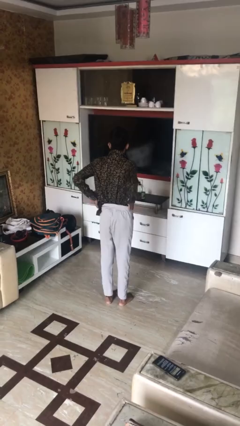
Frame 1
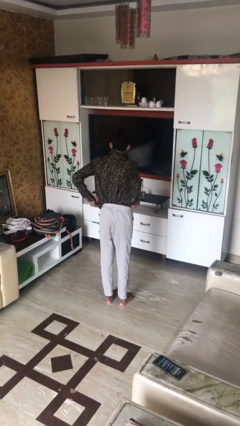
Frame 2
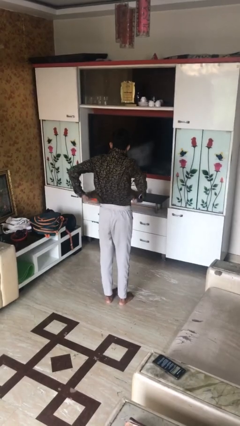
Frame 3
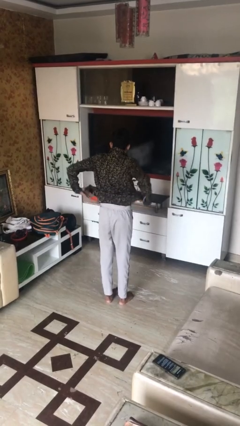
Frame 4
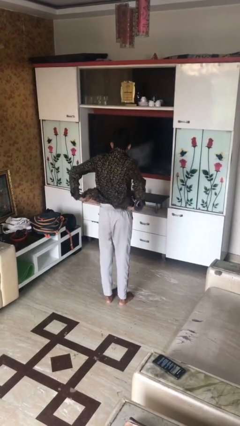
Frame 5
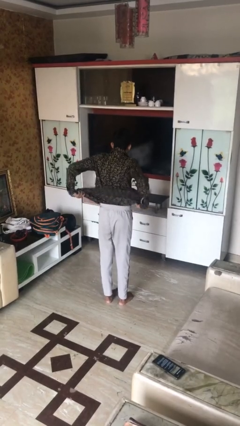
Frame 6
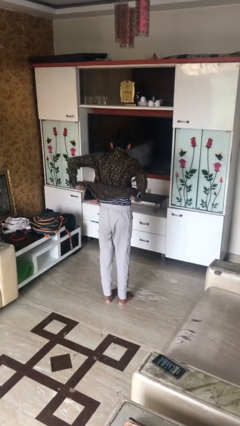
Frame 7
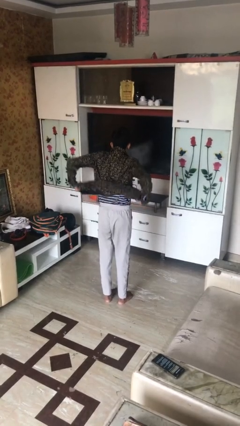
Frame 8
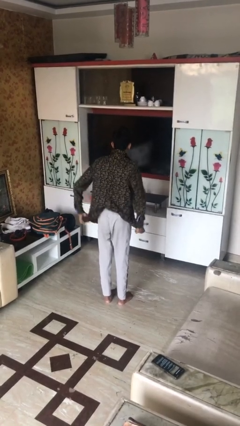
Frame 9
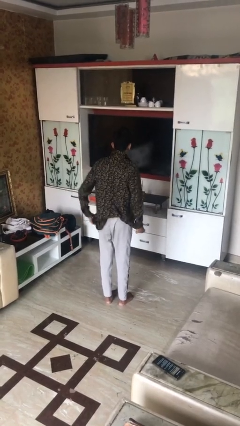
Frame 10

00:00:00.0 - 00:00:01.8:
person untucks shirt

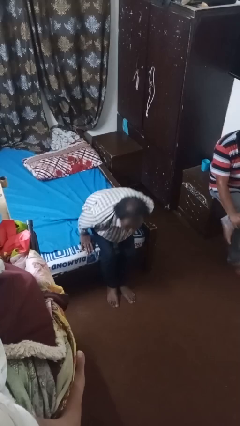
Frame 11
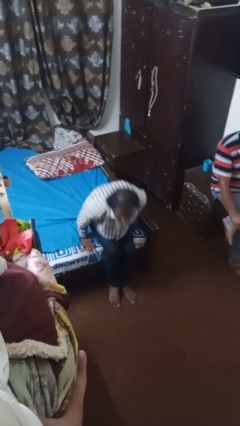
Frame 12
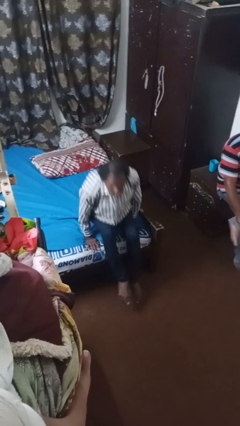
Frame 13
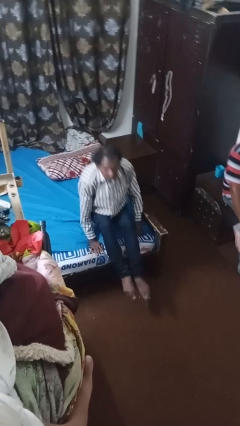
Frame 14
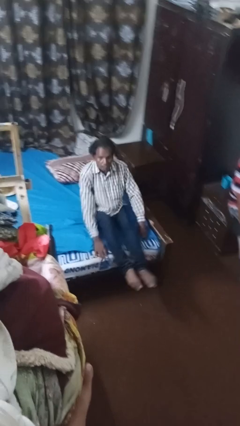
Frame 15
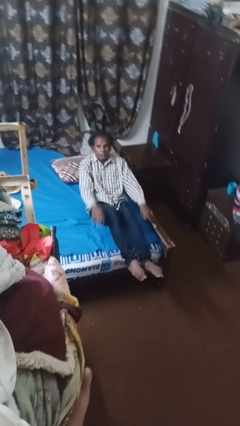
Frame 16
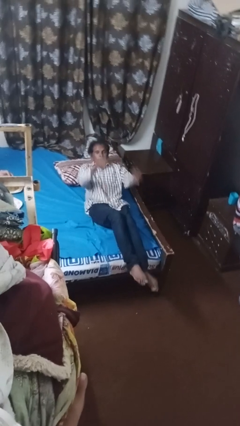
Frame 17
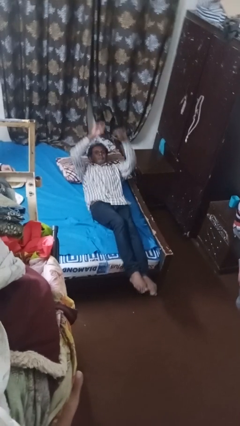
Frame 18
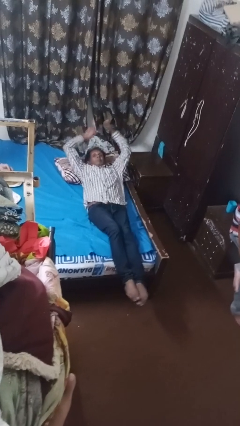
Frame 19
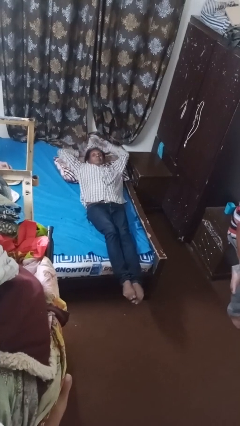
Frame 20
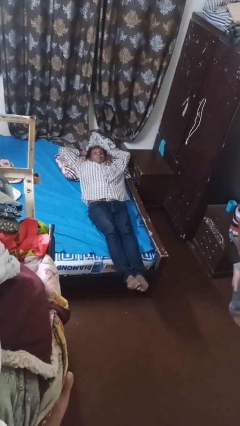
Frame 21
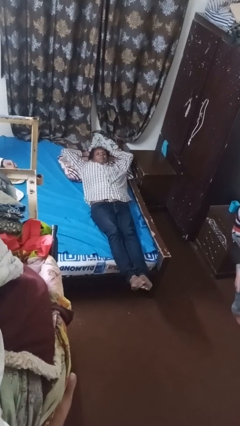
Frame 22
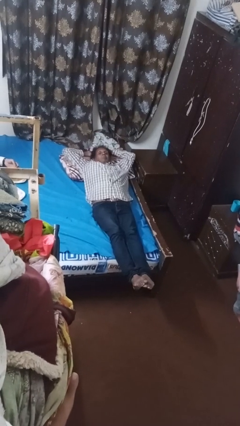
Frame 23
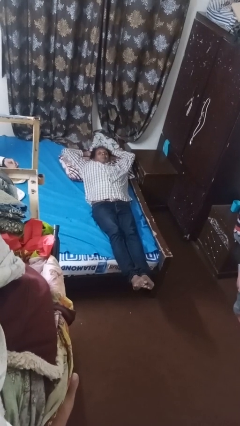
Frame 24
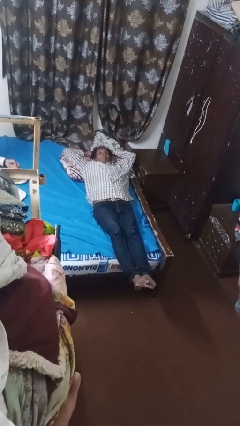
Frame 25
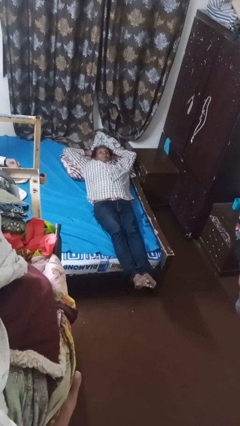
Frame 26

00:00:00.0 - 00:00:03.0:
person lies down on bed

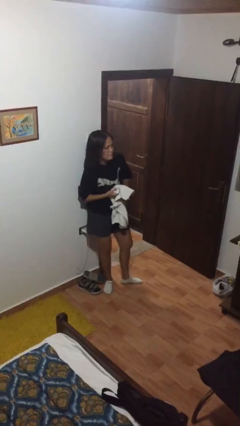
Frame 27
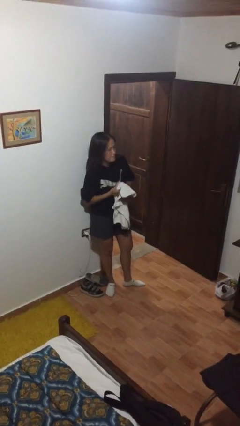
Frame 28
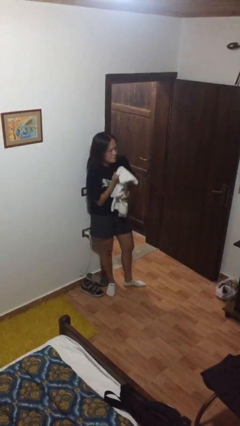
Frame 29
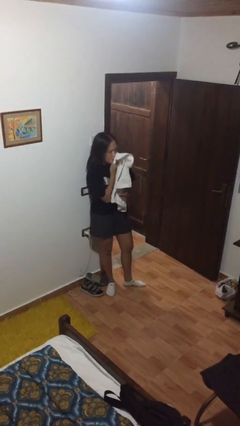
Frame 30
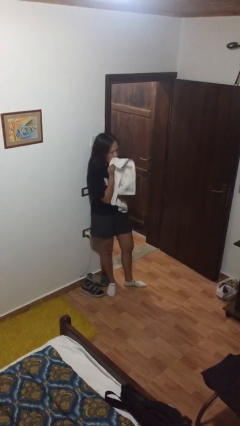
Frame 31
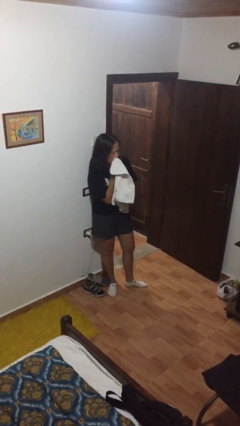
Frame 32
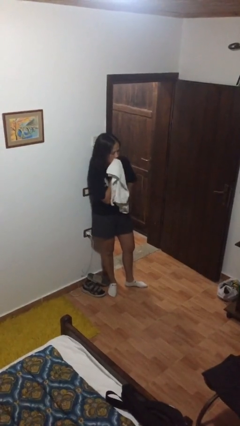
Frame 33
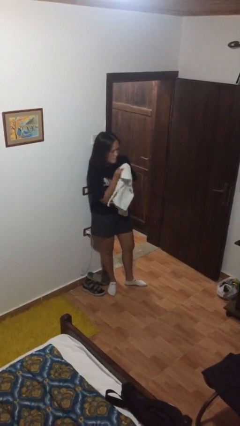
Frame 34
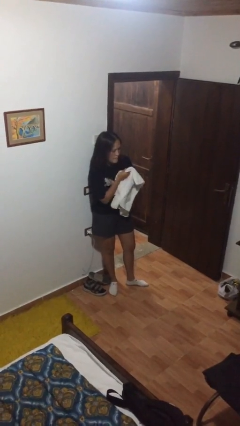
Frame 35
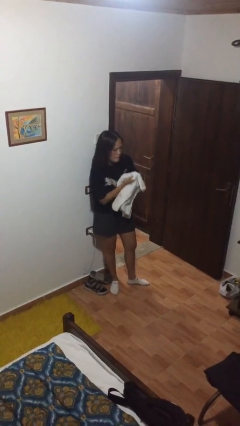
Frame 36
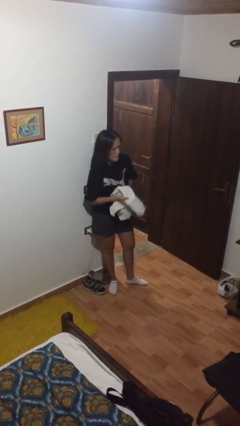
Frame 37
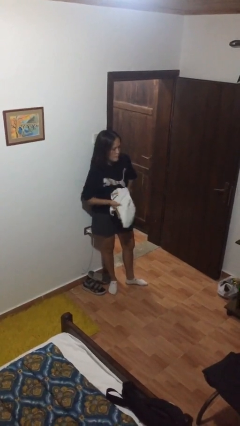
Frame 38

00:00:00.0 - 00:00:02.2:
person wipes mouth with napkin

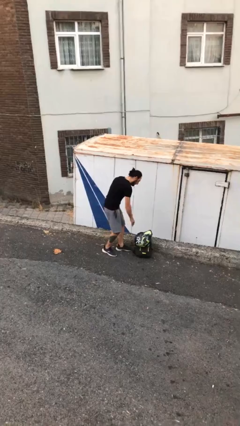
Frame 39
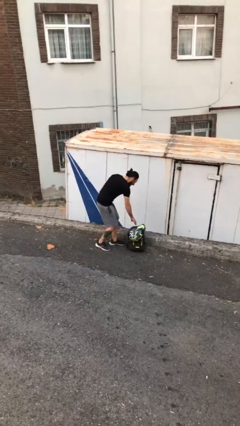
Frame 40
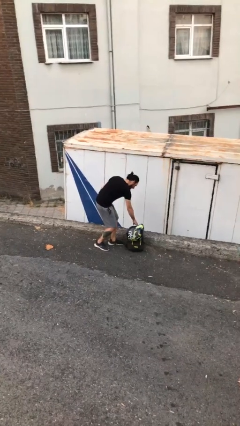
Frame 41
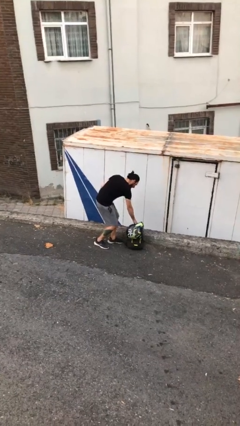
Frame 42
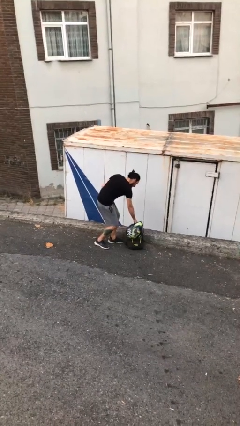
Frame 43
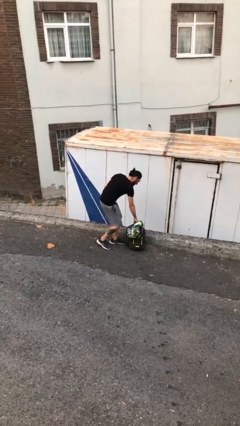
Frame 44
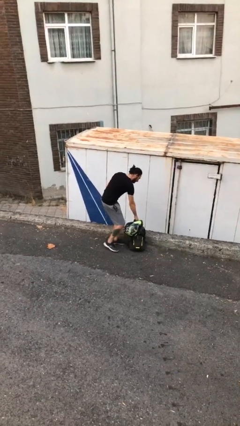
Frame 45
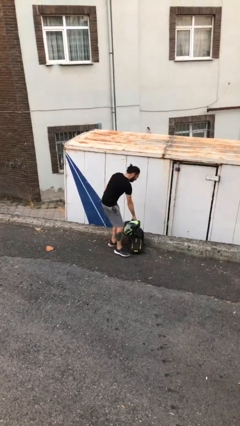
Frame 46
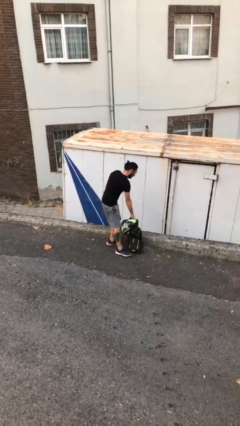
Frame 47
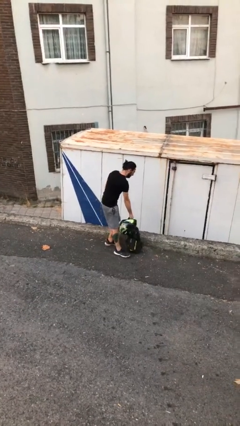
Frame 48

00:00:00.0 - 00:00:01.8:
person picks up object from floor

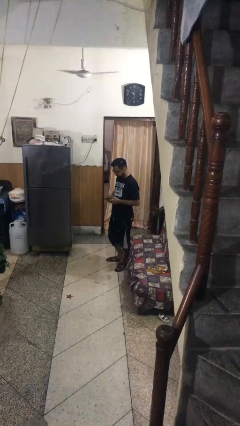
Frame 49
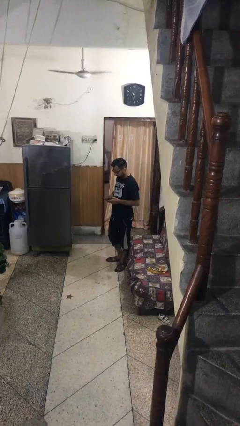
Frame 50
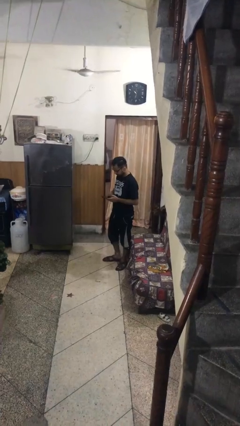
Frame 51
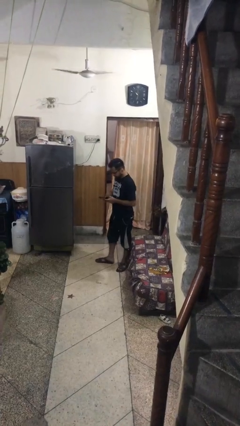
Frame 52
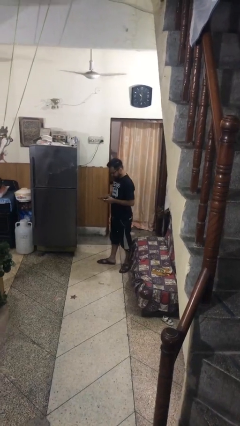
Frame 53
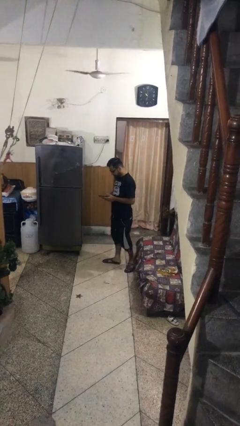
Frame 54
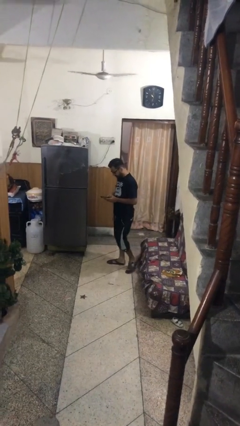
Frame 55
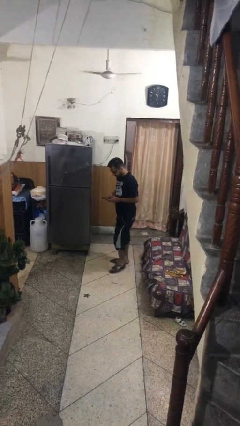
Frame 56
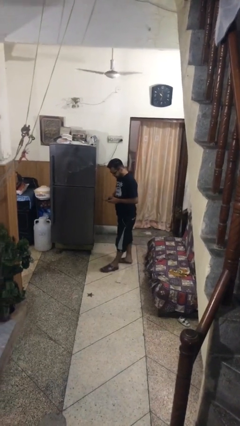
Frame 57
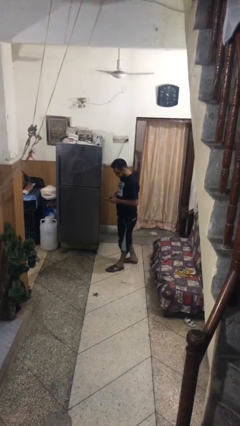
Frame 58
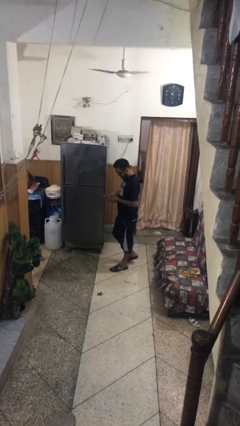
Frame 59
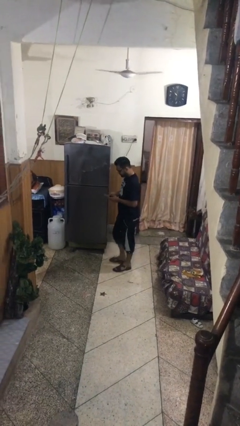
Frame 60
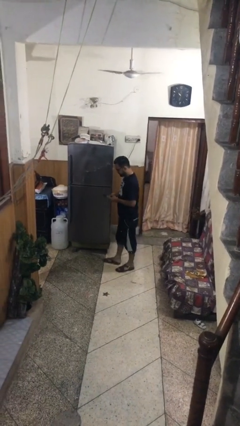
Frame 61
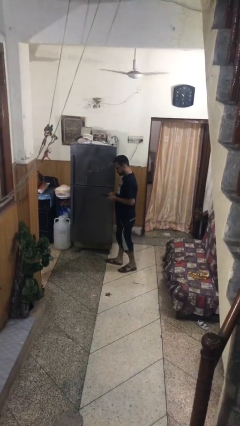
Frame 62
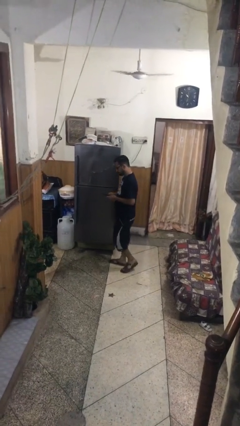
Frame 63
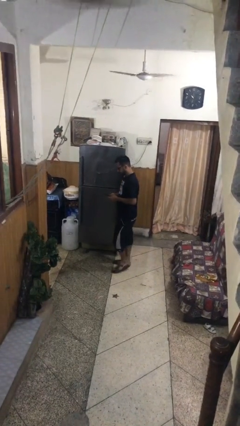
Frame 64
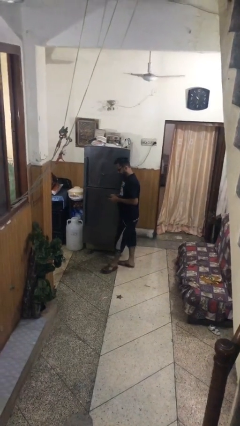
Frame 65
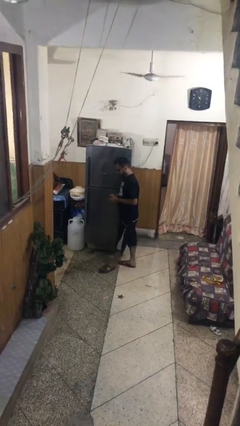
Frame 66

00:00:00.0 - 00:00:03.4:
person texts on phone

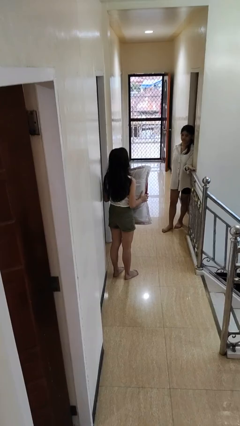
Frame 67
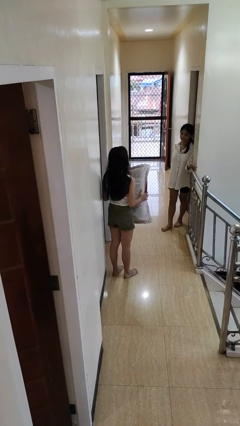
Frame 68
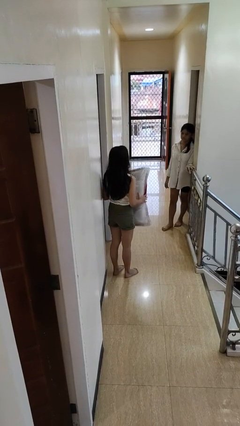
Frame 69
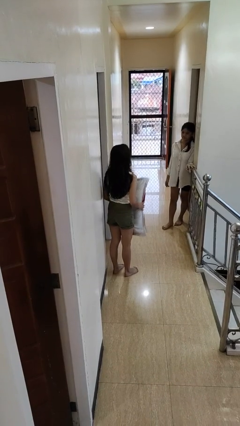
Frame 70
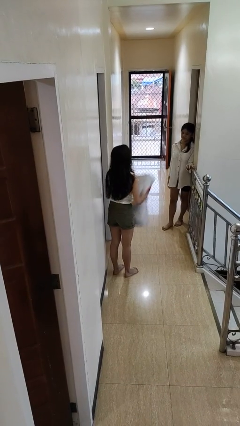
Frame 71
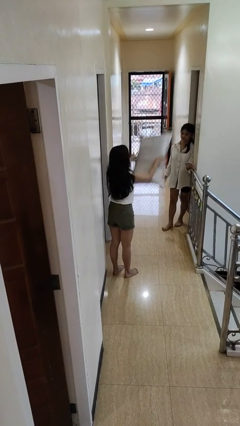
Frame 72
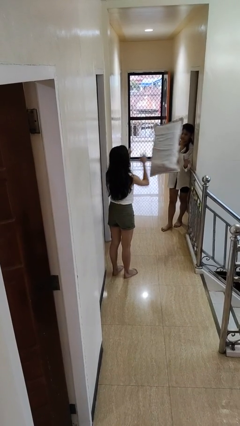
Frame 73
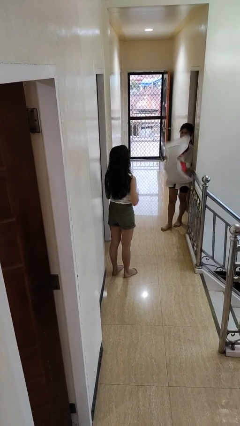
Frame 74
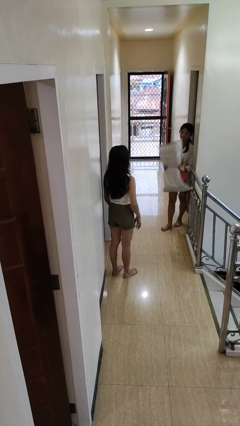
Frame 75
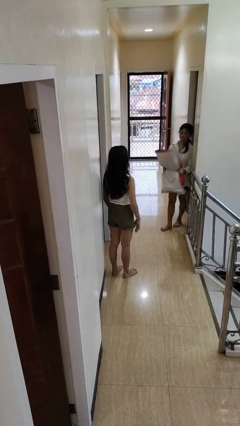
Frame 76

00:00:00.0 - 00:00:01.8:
person throws object to person

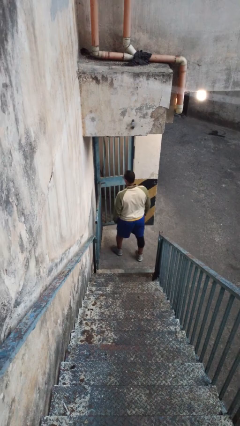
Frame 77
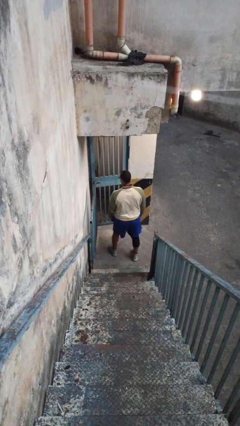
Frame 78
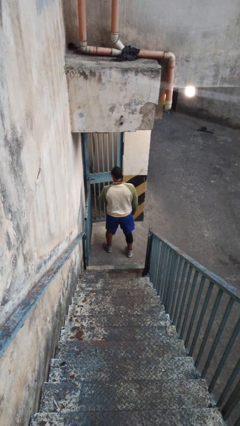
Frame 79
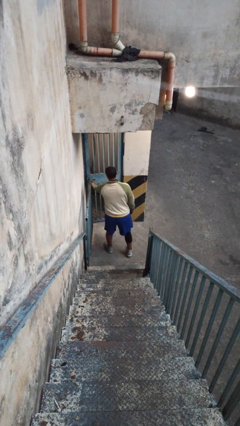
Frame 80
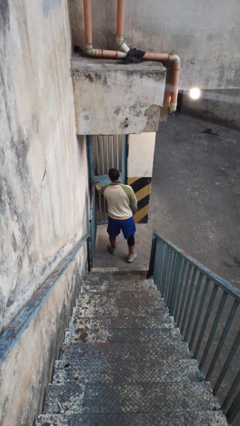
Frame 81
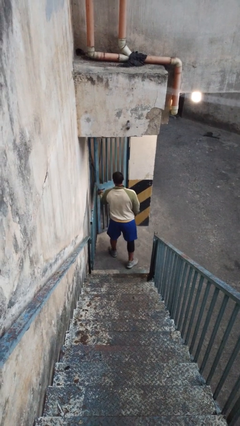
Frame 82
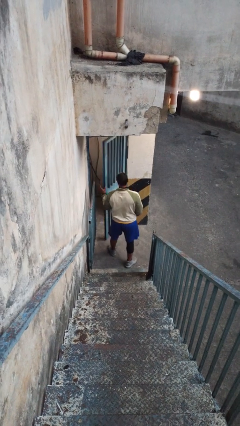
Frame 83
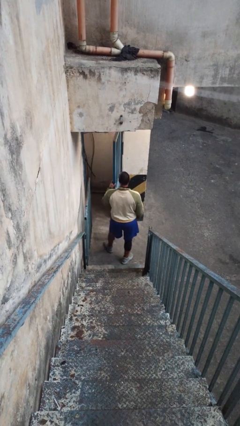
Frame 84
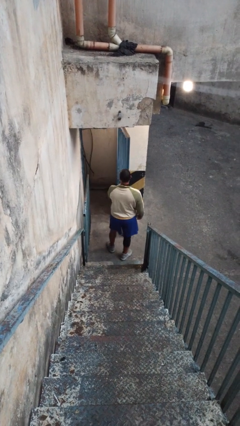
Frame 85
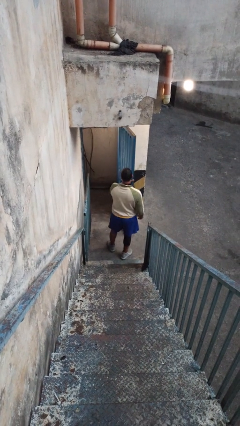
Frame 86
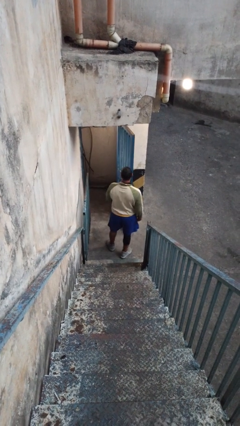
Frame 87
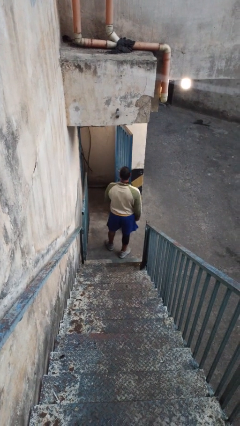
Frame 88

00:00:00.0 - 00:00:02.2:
person opens facility door

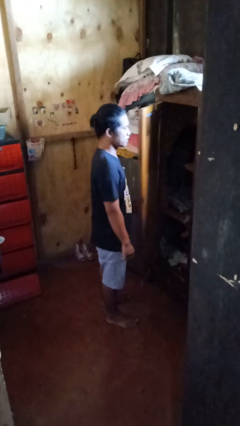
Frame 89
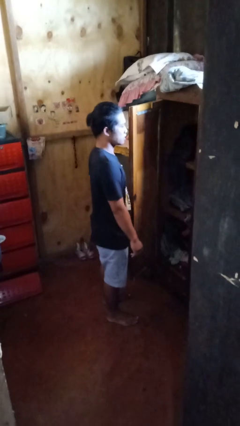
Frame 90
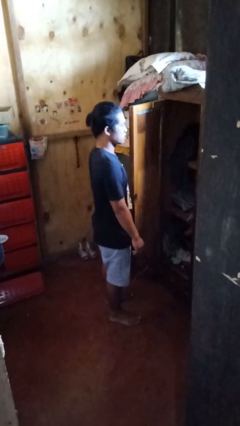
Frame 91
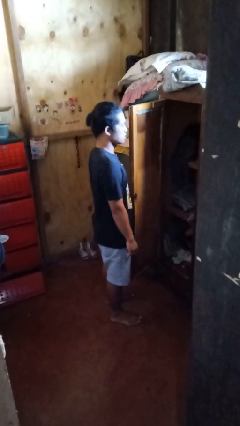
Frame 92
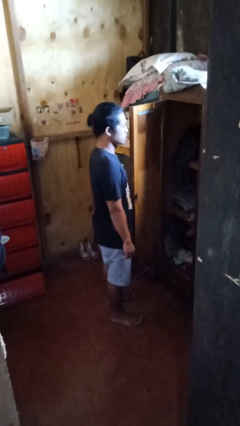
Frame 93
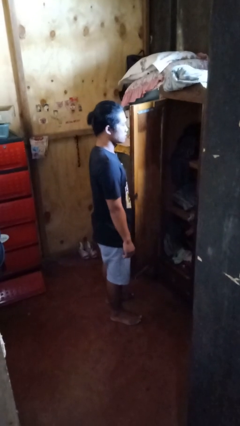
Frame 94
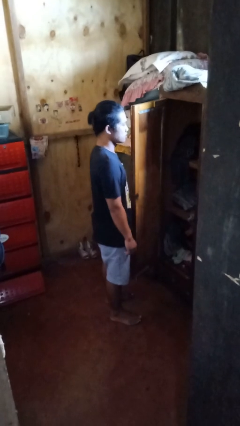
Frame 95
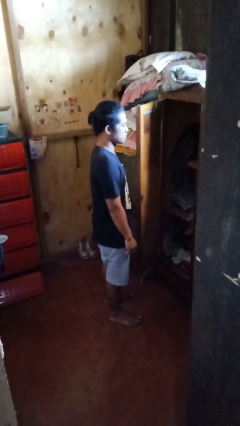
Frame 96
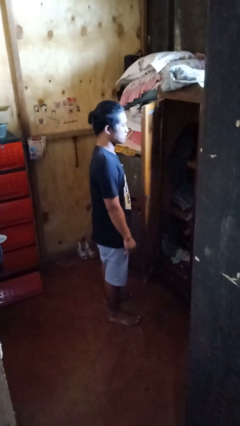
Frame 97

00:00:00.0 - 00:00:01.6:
person opens closet door
